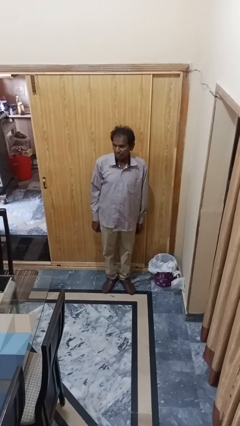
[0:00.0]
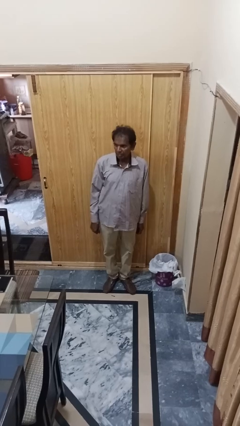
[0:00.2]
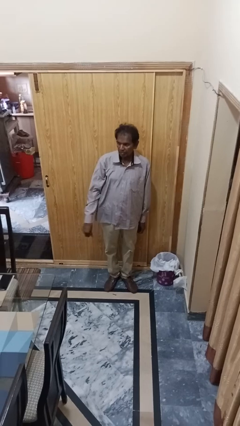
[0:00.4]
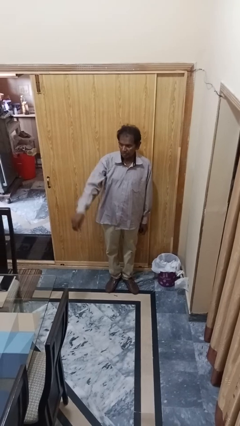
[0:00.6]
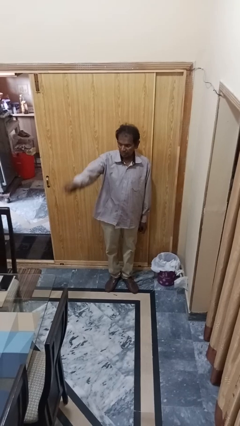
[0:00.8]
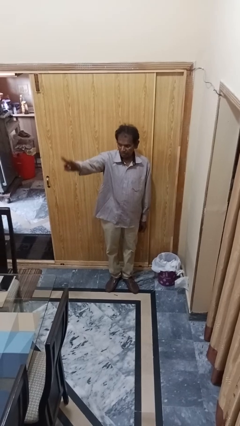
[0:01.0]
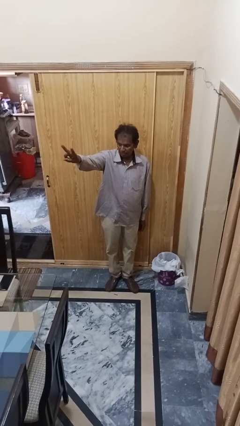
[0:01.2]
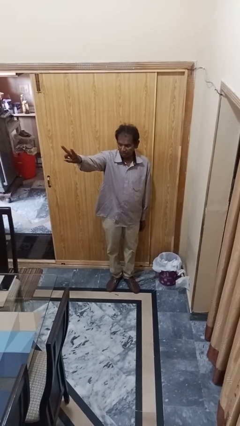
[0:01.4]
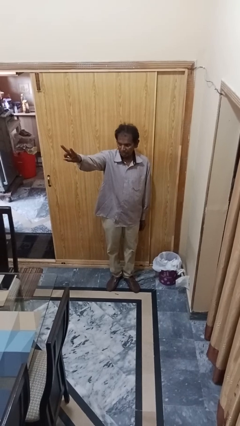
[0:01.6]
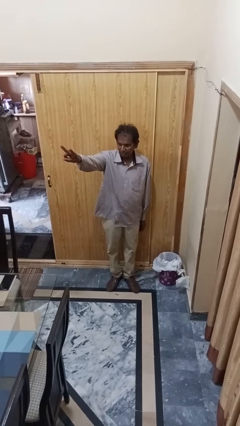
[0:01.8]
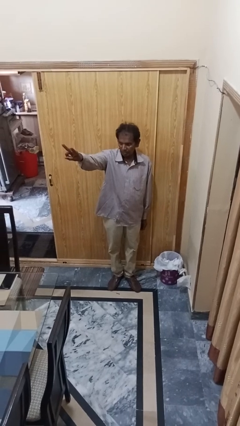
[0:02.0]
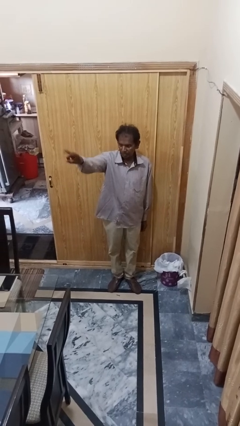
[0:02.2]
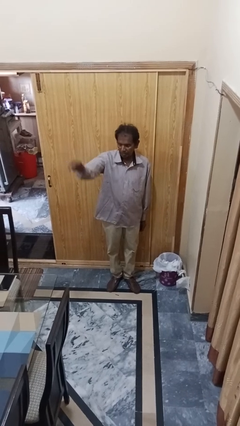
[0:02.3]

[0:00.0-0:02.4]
person gestures peace

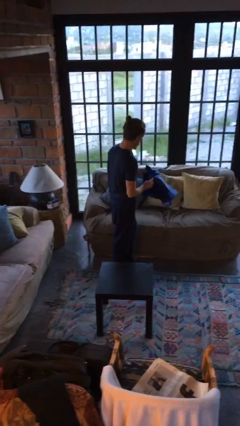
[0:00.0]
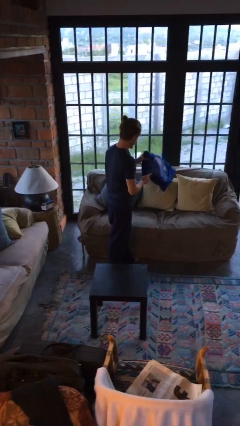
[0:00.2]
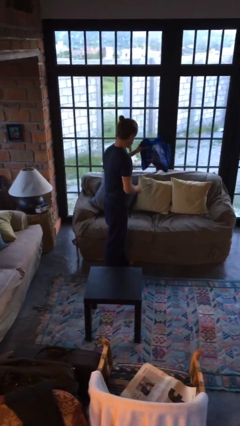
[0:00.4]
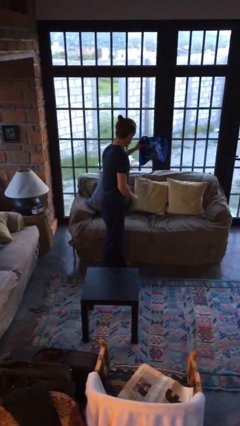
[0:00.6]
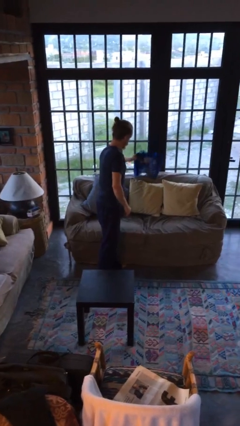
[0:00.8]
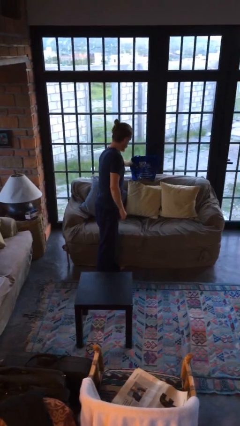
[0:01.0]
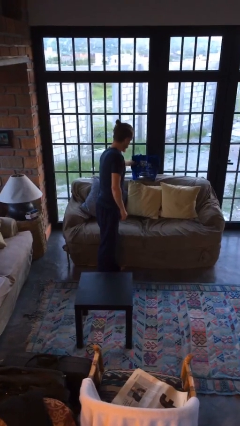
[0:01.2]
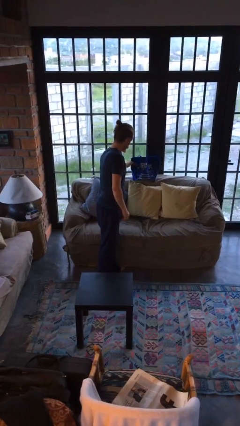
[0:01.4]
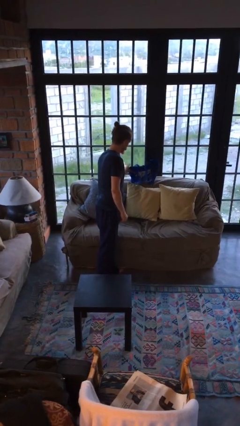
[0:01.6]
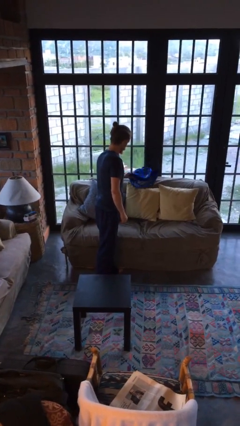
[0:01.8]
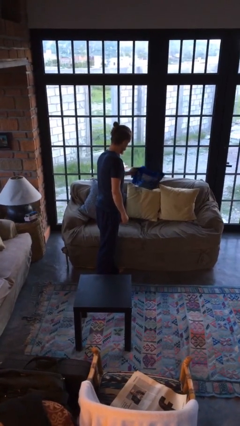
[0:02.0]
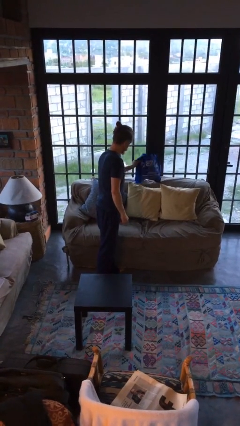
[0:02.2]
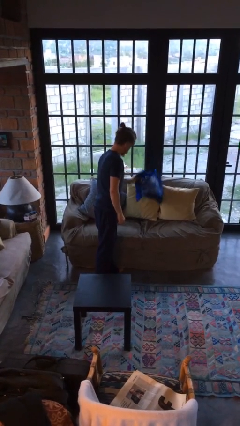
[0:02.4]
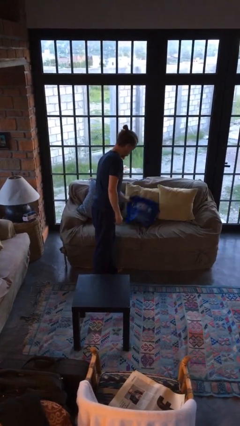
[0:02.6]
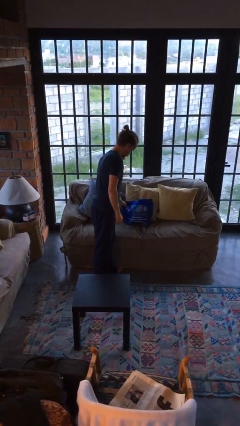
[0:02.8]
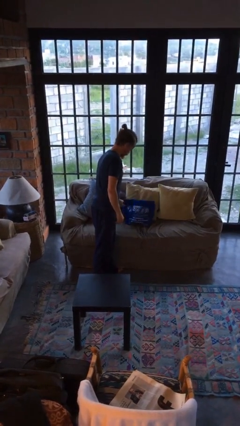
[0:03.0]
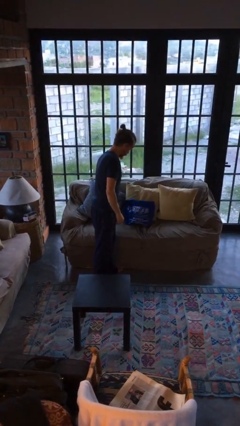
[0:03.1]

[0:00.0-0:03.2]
person puts down object on couch

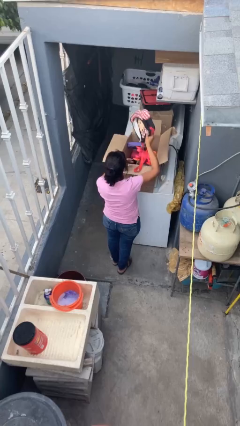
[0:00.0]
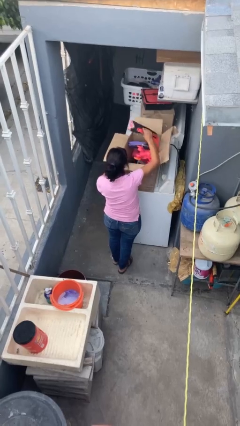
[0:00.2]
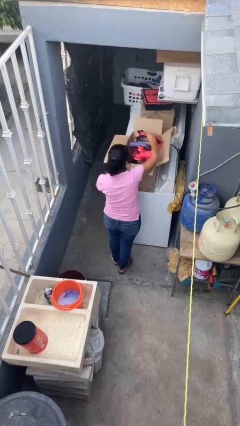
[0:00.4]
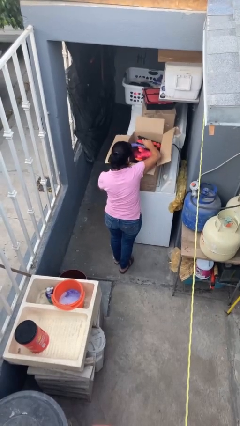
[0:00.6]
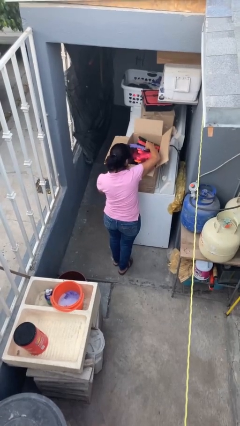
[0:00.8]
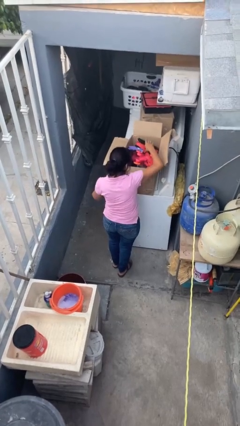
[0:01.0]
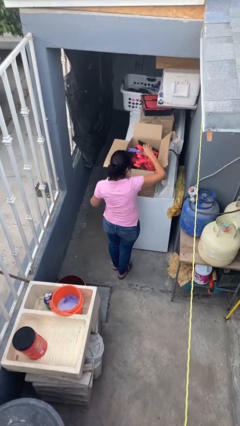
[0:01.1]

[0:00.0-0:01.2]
person puts object into box

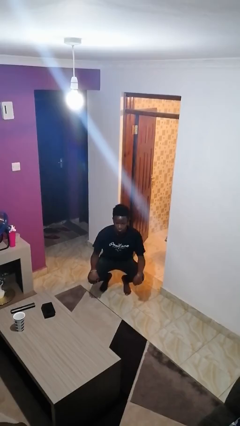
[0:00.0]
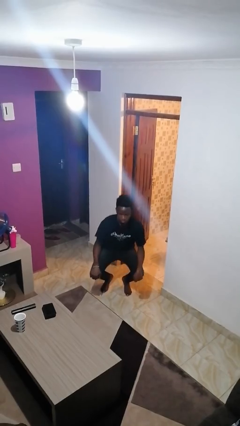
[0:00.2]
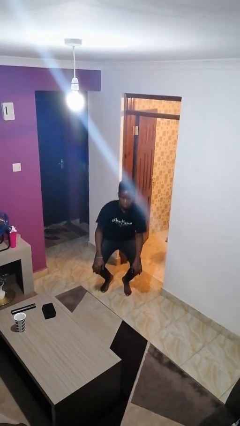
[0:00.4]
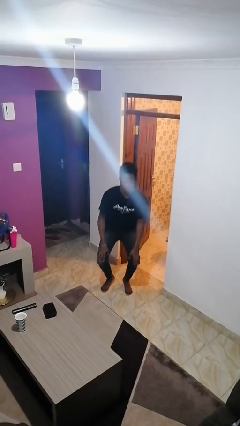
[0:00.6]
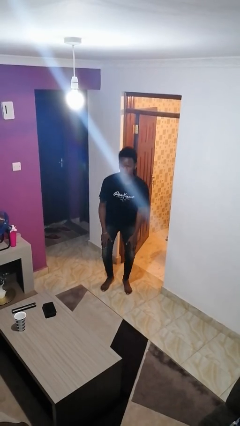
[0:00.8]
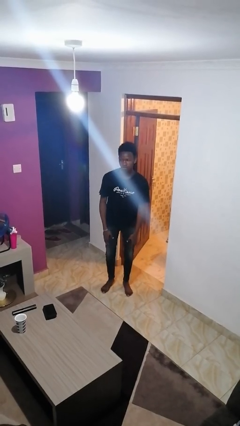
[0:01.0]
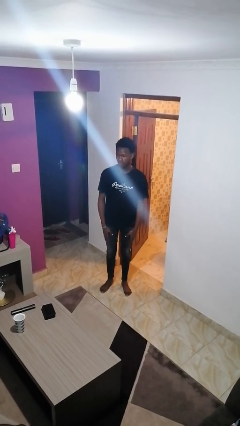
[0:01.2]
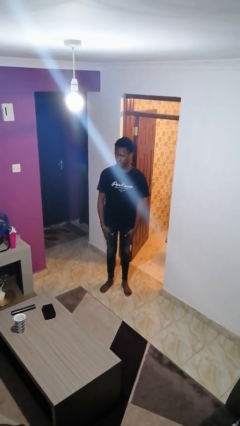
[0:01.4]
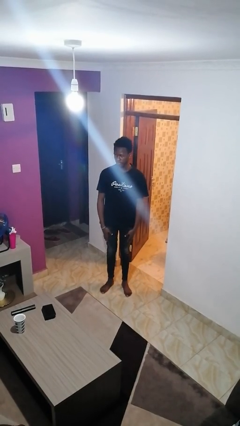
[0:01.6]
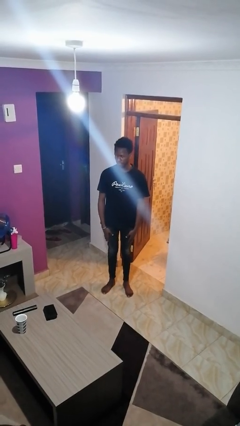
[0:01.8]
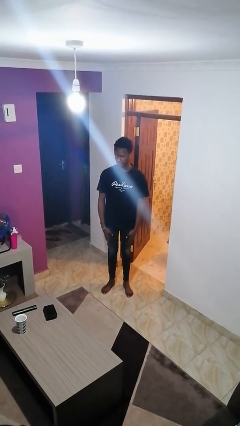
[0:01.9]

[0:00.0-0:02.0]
person stands up

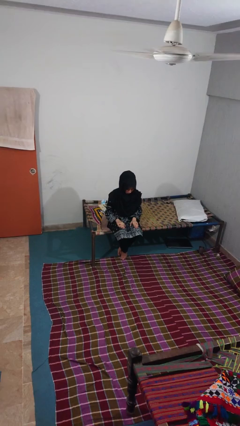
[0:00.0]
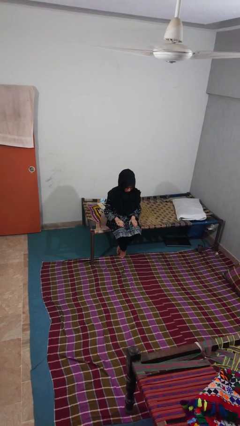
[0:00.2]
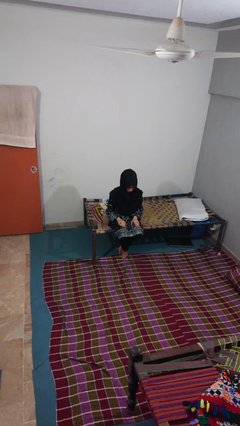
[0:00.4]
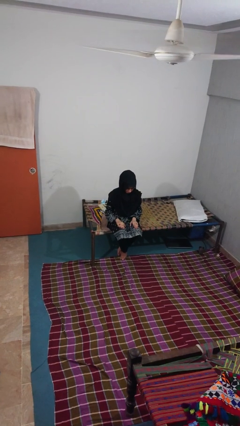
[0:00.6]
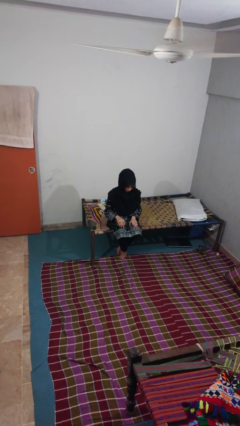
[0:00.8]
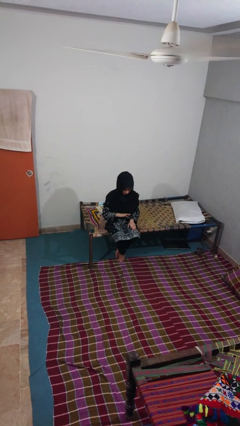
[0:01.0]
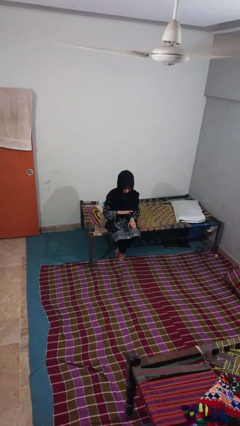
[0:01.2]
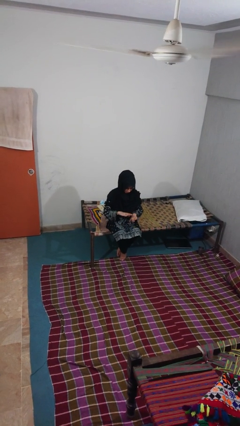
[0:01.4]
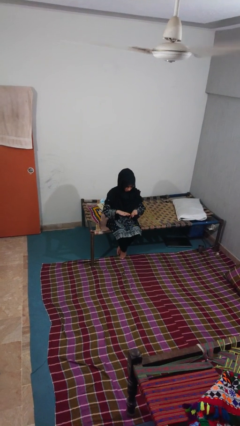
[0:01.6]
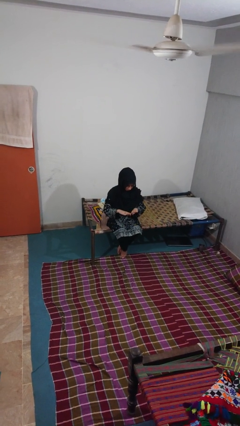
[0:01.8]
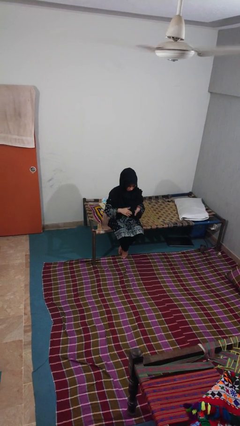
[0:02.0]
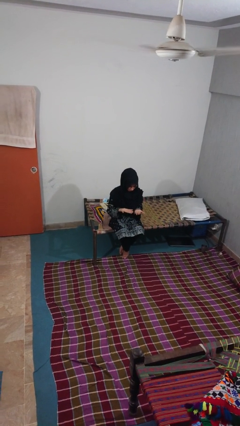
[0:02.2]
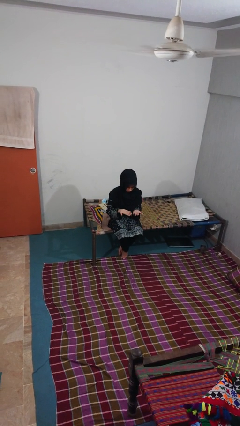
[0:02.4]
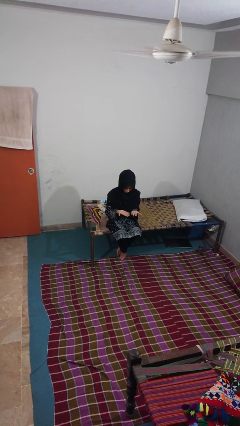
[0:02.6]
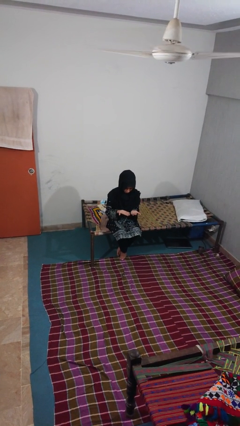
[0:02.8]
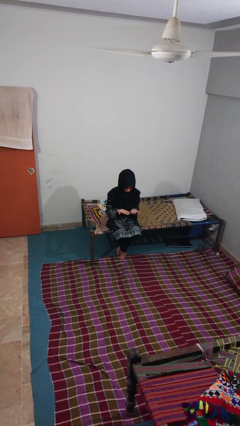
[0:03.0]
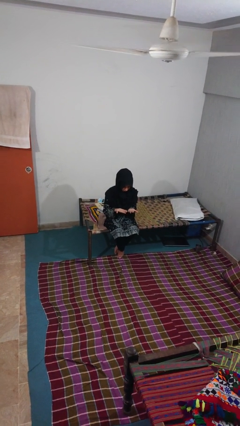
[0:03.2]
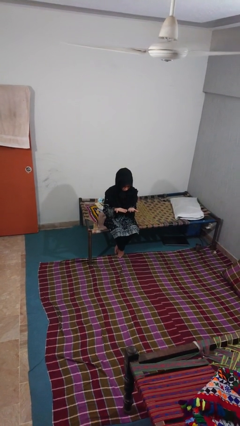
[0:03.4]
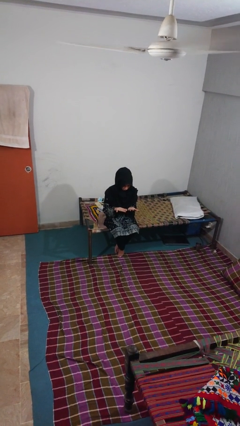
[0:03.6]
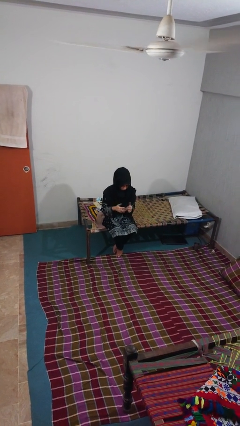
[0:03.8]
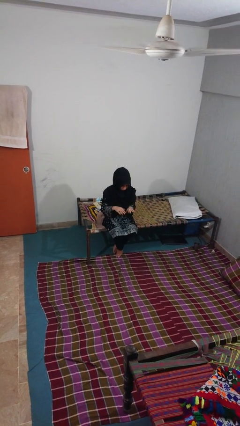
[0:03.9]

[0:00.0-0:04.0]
person looks at hands in lap

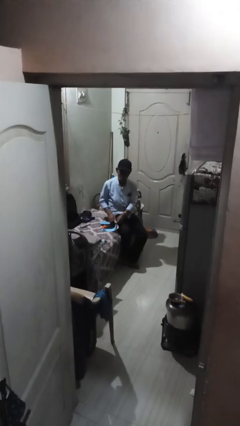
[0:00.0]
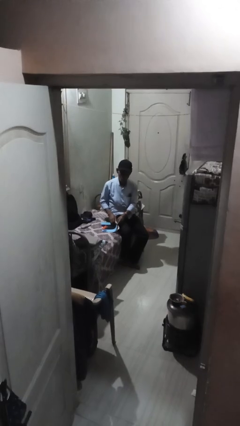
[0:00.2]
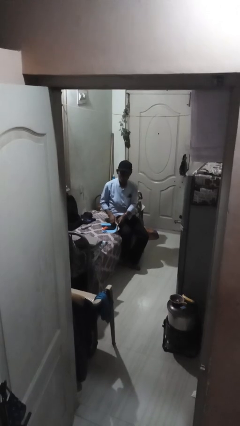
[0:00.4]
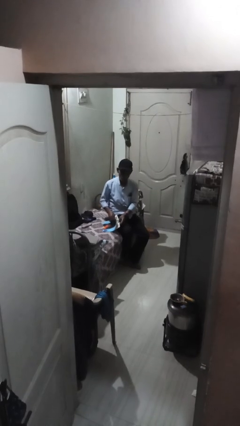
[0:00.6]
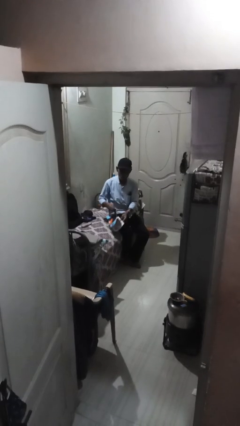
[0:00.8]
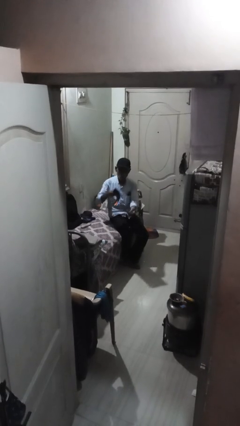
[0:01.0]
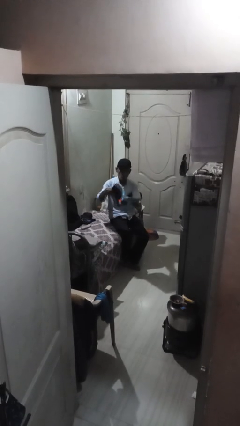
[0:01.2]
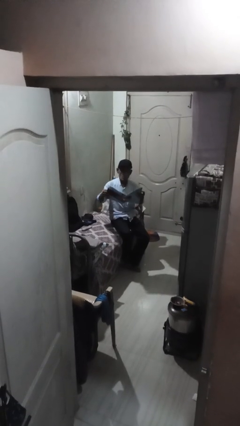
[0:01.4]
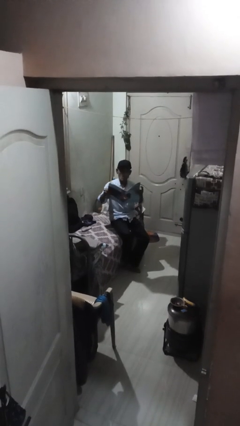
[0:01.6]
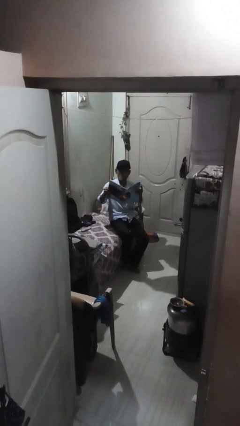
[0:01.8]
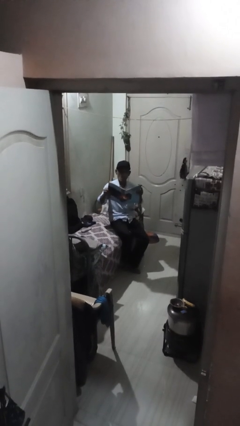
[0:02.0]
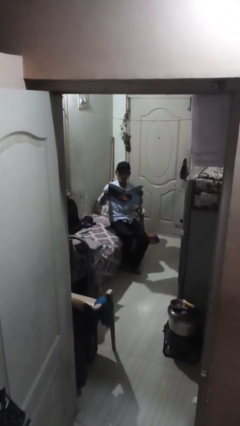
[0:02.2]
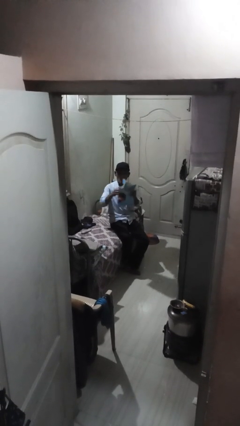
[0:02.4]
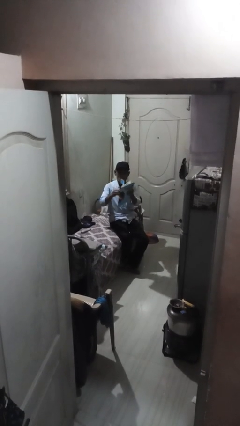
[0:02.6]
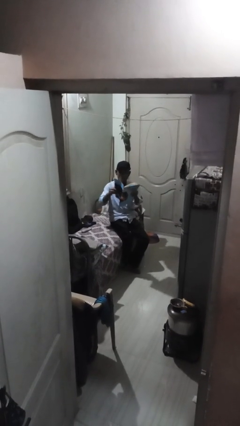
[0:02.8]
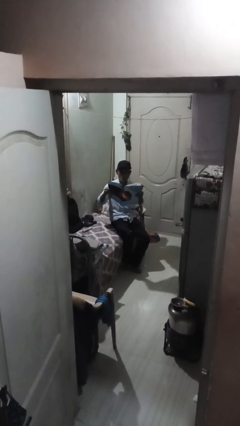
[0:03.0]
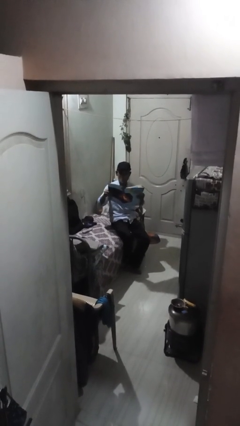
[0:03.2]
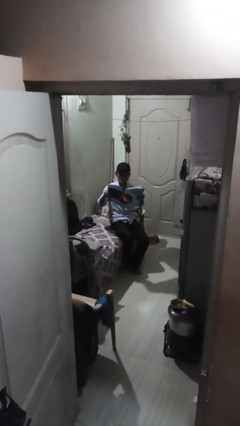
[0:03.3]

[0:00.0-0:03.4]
person reads magazine

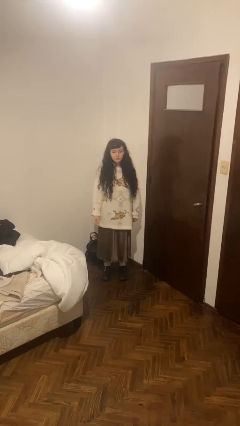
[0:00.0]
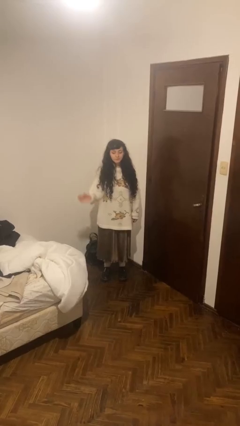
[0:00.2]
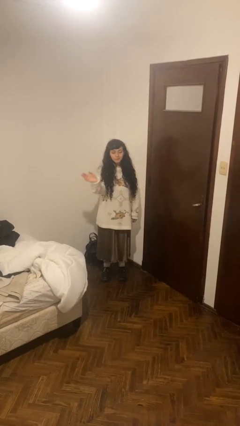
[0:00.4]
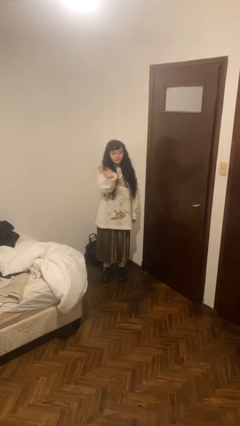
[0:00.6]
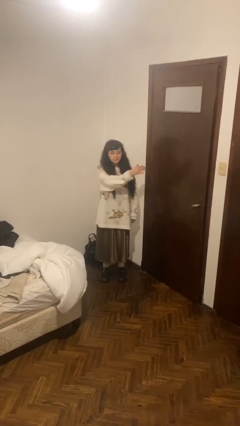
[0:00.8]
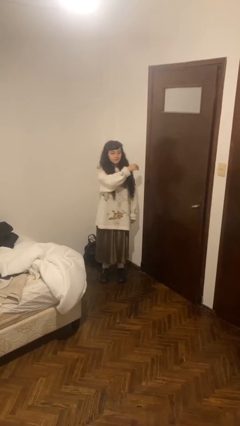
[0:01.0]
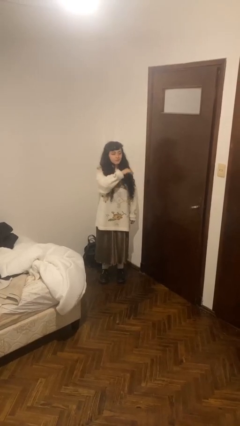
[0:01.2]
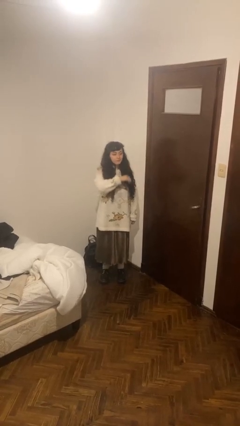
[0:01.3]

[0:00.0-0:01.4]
person gestures swipe left
